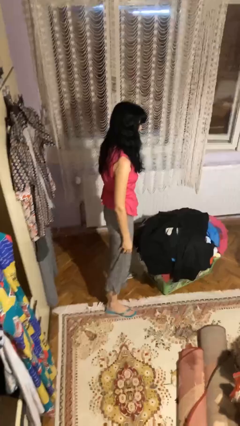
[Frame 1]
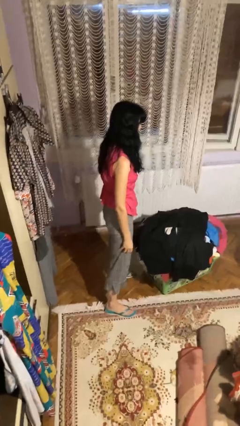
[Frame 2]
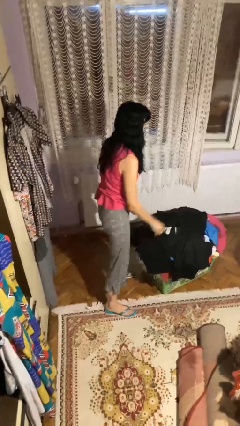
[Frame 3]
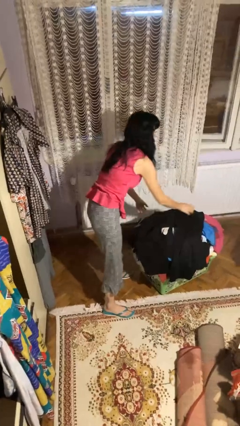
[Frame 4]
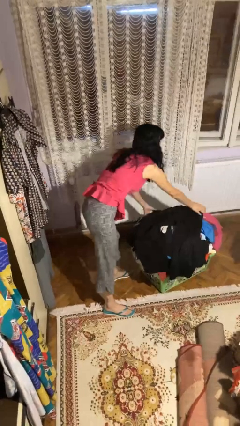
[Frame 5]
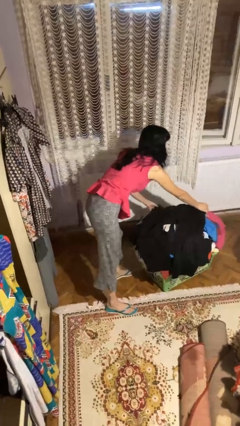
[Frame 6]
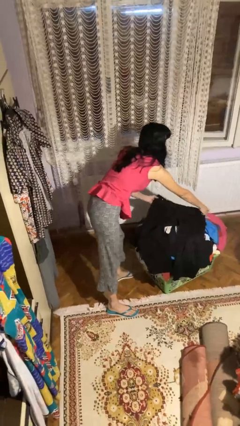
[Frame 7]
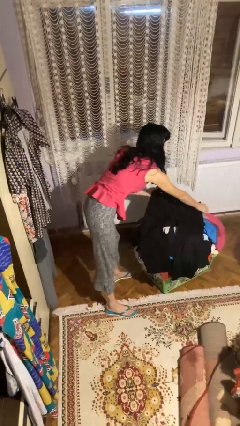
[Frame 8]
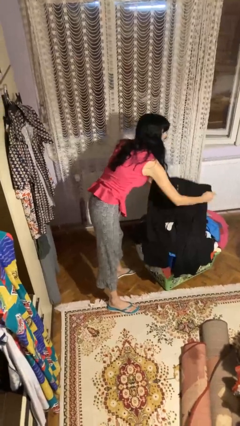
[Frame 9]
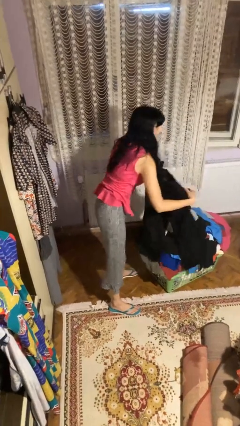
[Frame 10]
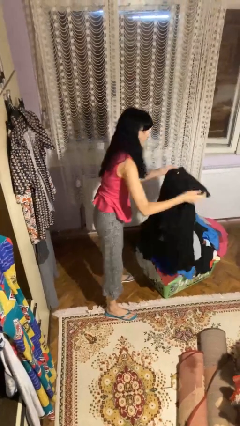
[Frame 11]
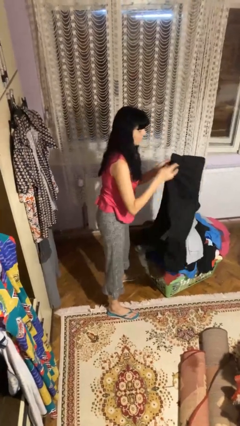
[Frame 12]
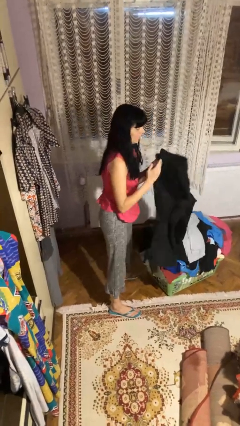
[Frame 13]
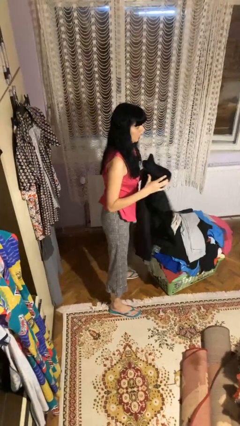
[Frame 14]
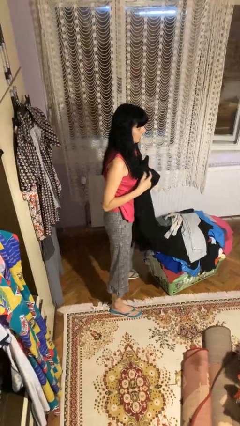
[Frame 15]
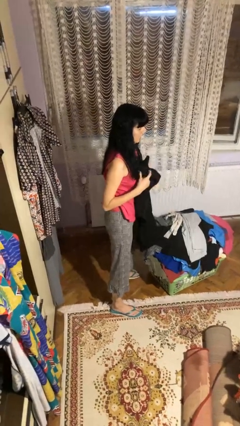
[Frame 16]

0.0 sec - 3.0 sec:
person folds pants

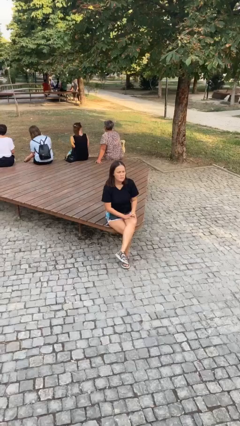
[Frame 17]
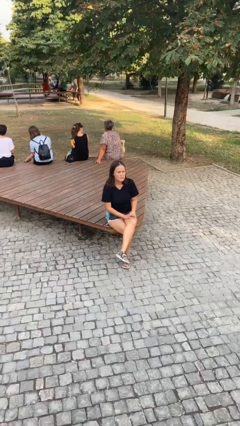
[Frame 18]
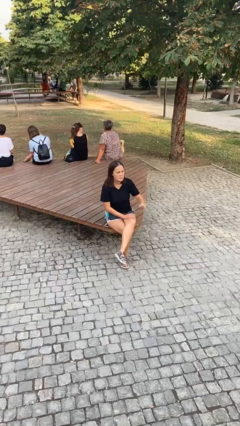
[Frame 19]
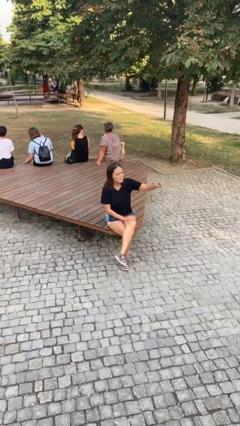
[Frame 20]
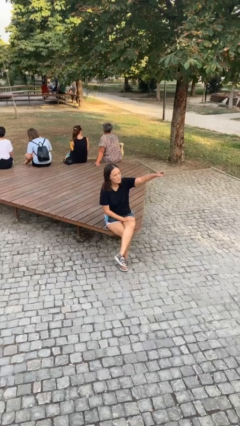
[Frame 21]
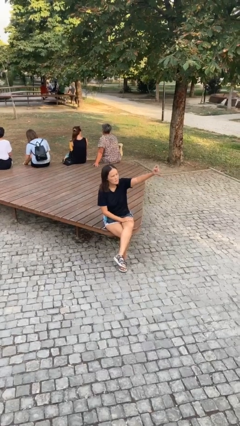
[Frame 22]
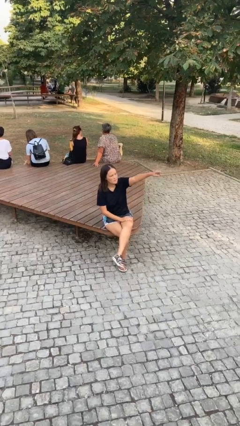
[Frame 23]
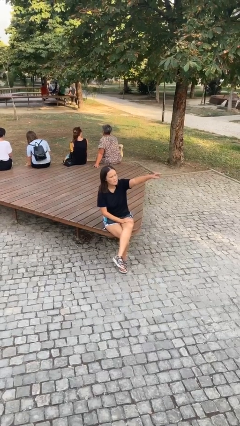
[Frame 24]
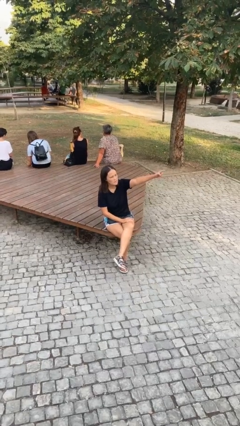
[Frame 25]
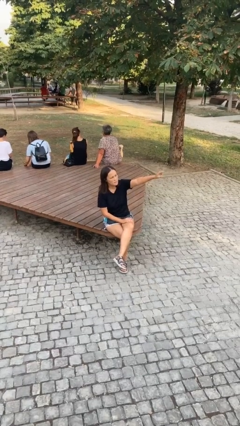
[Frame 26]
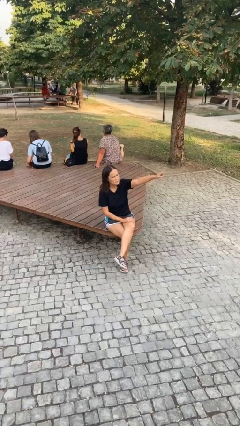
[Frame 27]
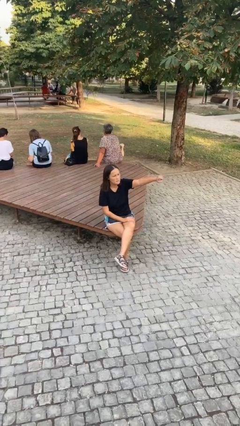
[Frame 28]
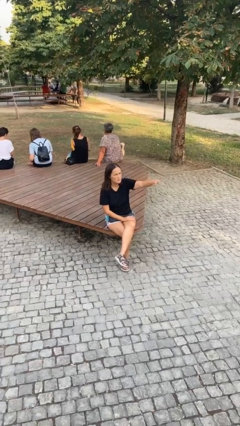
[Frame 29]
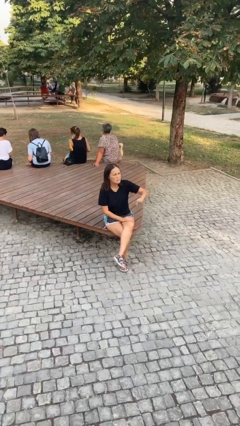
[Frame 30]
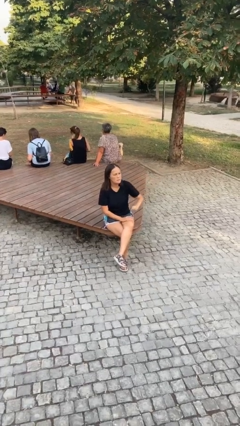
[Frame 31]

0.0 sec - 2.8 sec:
person points at person

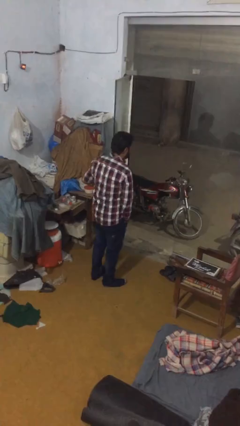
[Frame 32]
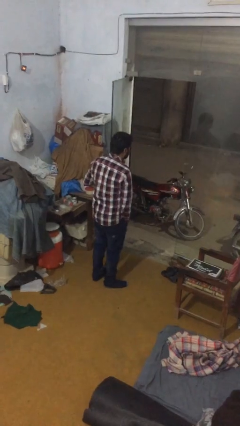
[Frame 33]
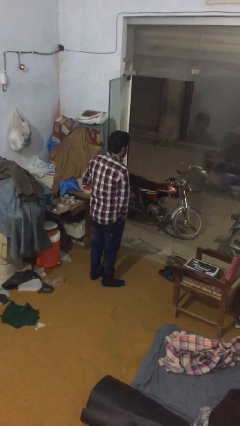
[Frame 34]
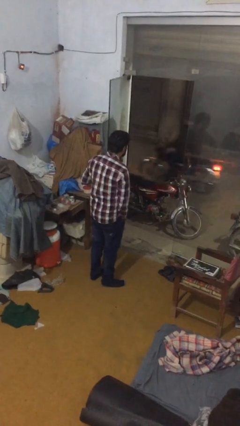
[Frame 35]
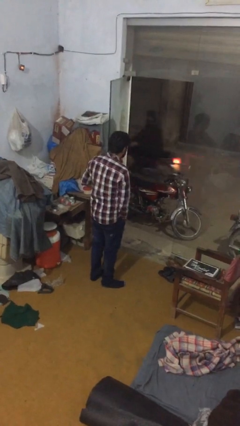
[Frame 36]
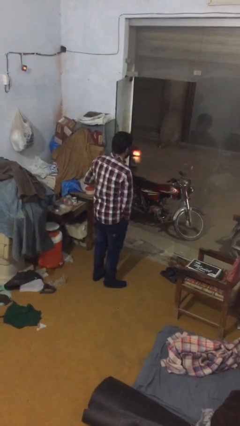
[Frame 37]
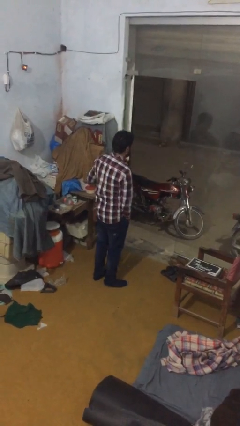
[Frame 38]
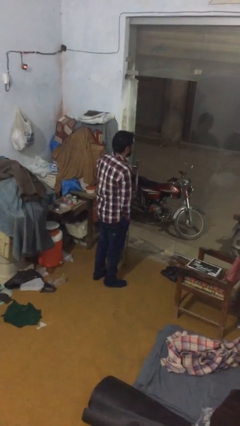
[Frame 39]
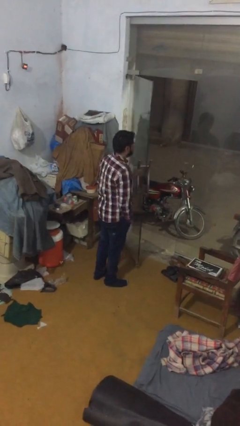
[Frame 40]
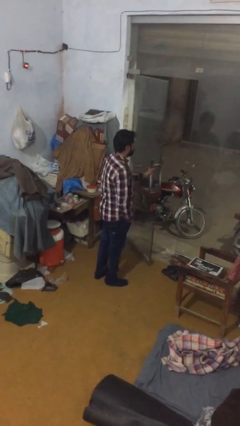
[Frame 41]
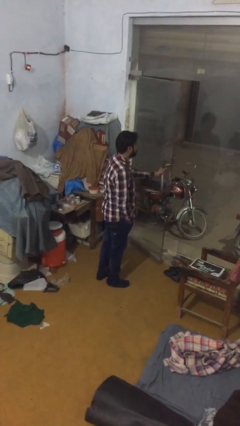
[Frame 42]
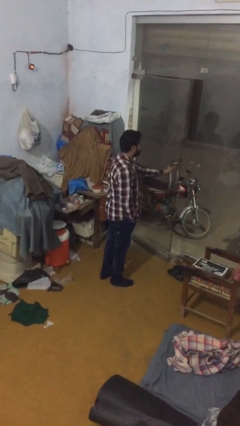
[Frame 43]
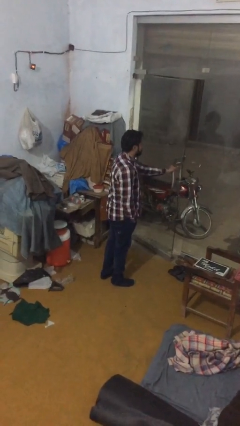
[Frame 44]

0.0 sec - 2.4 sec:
person closes facility door

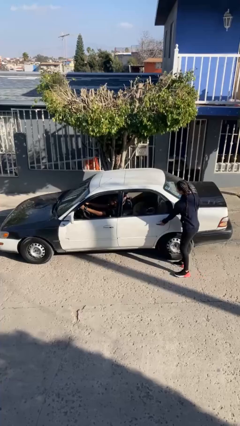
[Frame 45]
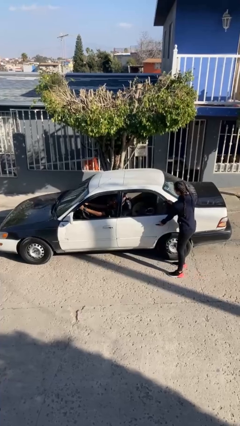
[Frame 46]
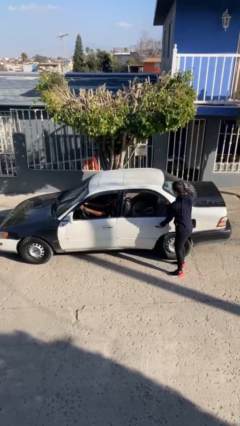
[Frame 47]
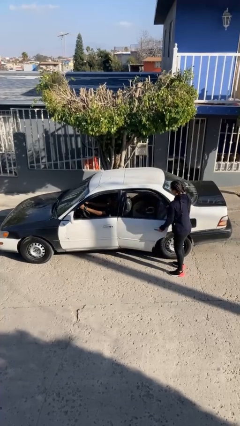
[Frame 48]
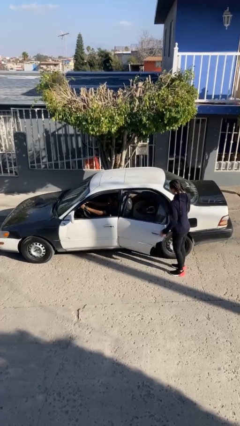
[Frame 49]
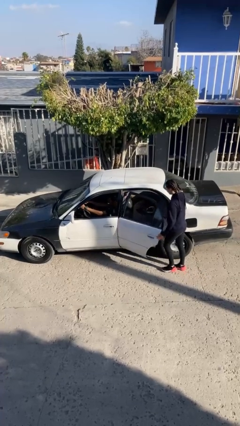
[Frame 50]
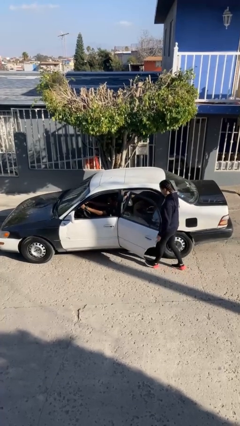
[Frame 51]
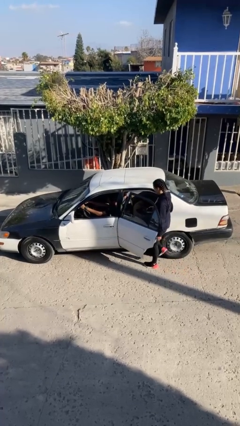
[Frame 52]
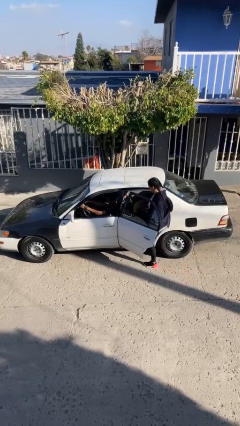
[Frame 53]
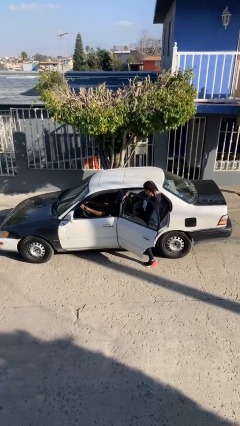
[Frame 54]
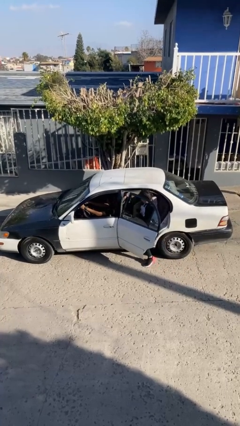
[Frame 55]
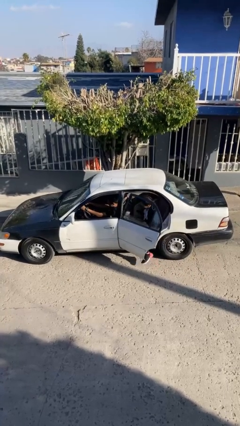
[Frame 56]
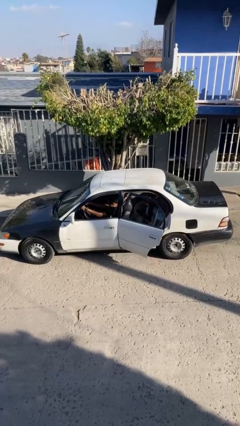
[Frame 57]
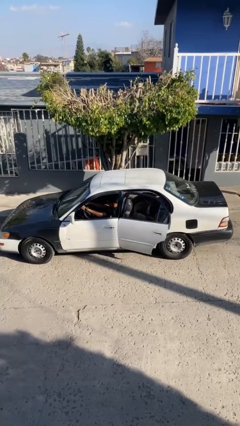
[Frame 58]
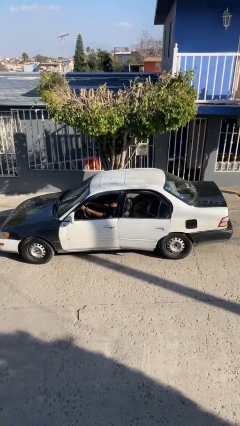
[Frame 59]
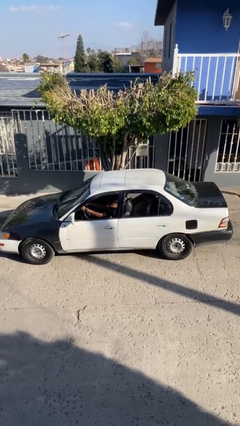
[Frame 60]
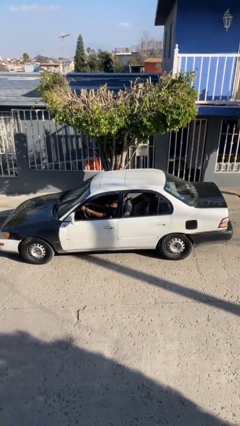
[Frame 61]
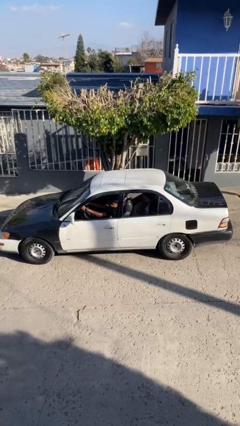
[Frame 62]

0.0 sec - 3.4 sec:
car picks up person

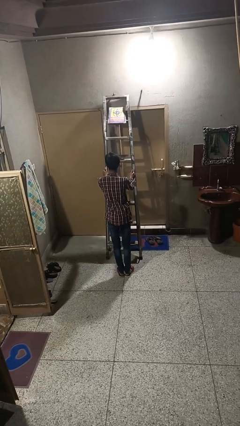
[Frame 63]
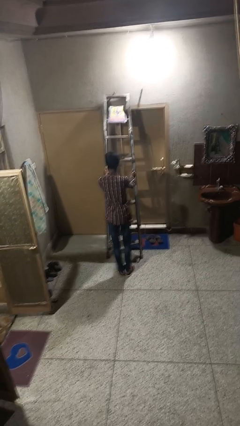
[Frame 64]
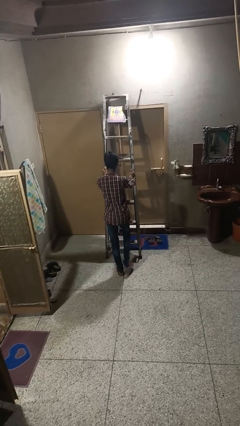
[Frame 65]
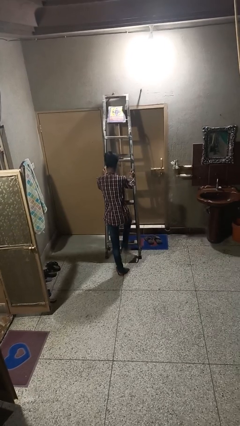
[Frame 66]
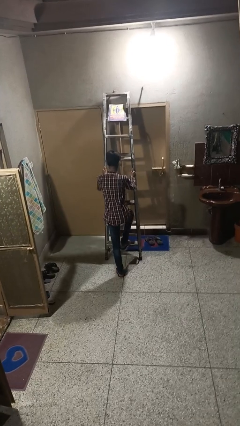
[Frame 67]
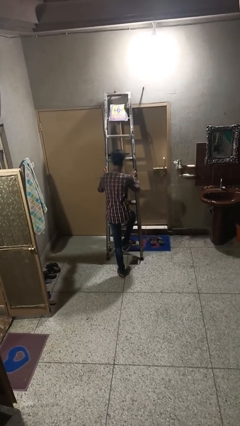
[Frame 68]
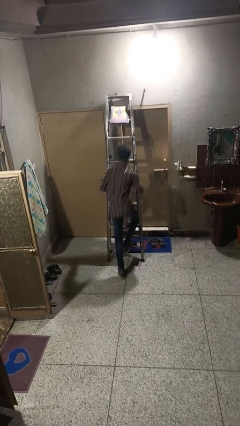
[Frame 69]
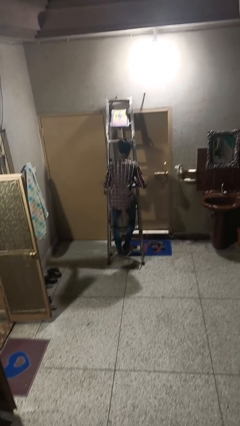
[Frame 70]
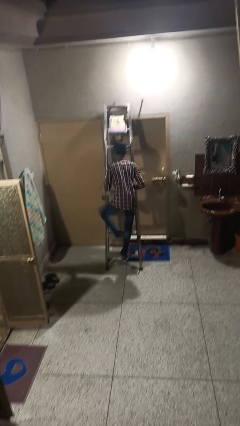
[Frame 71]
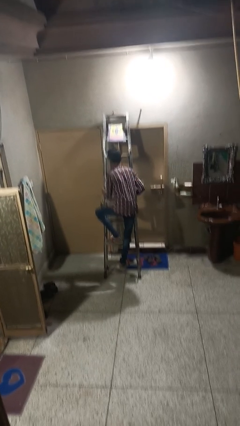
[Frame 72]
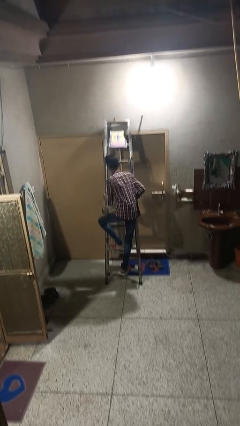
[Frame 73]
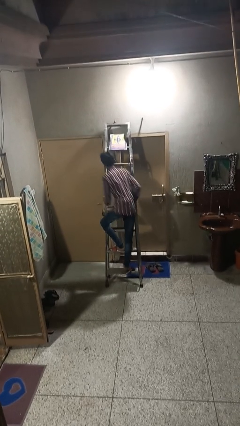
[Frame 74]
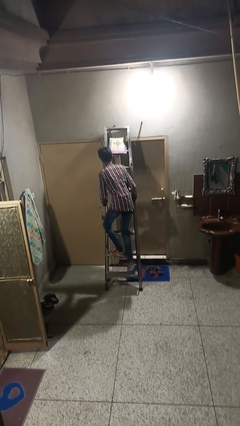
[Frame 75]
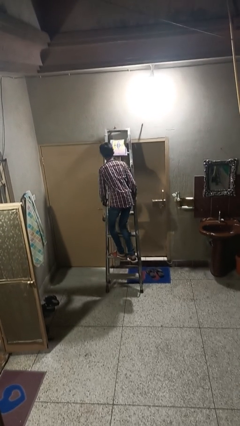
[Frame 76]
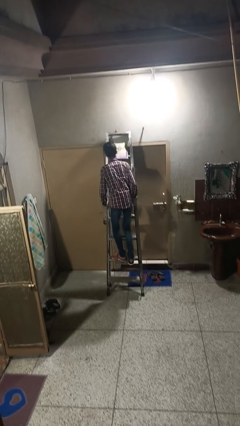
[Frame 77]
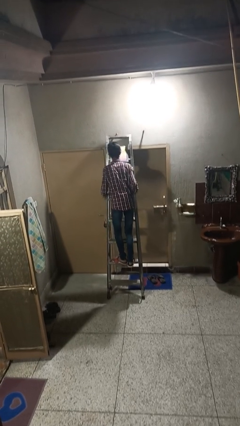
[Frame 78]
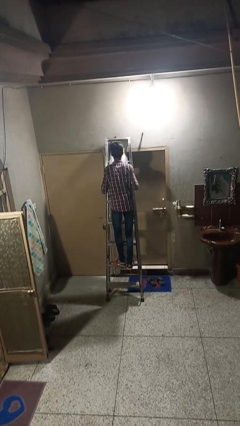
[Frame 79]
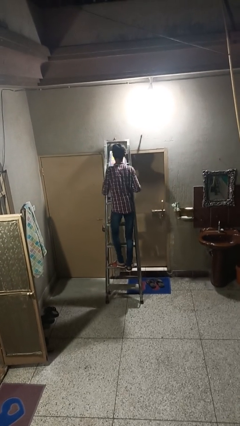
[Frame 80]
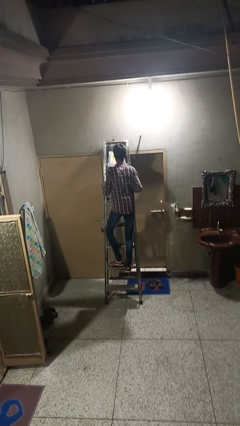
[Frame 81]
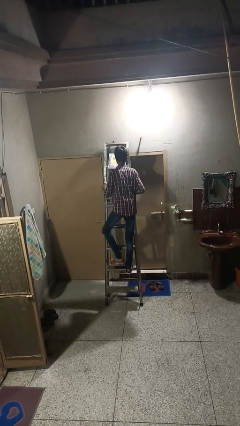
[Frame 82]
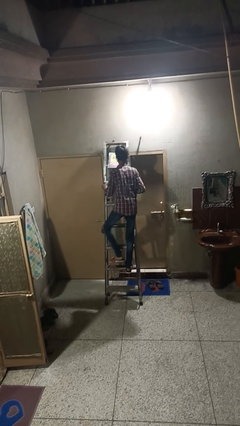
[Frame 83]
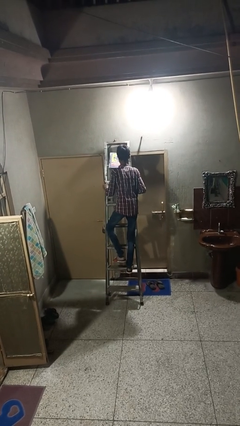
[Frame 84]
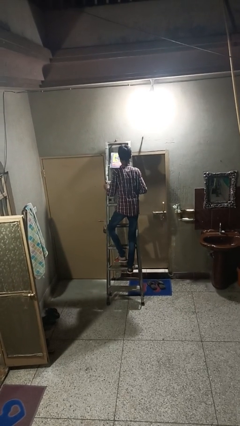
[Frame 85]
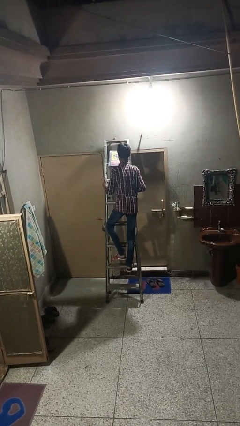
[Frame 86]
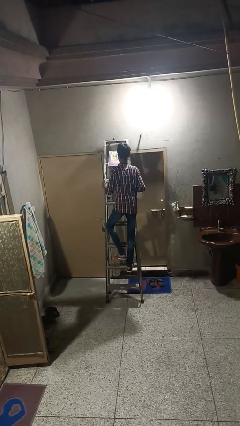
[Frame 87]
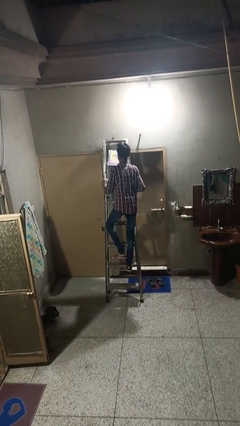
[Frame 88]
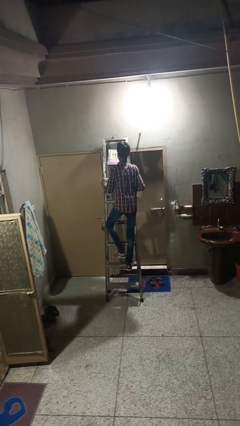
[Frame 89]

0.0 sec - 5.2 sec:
person climbs up ladder

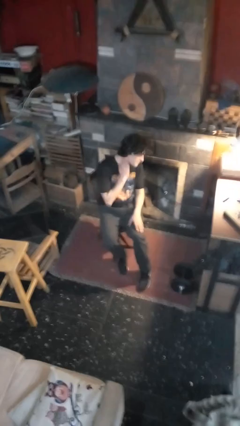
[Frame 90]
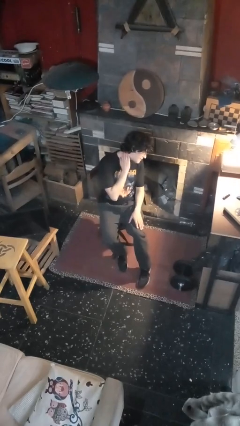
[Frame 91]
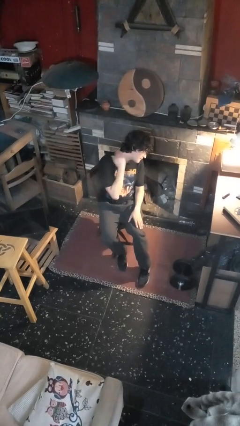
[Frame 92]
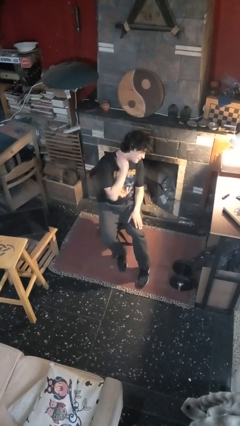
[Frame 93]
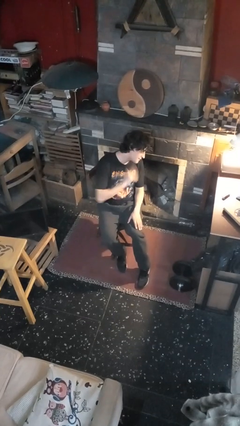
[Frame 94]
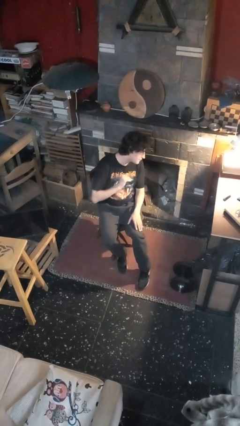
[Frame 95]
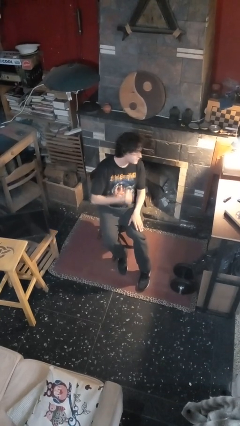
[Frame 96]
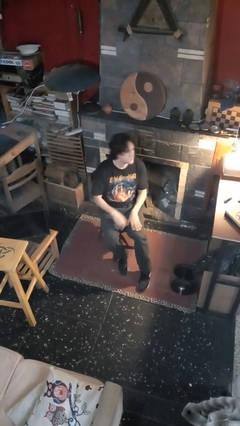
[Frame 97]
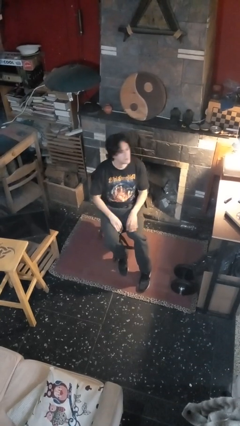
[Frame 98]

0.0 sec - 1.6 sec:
person swats bug
